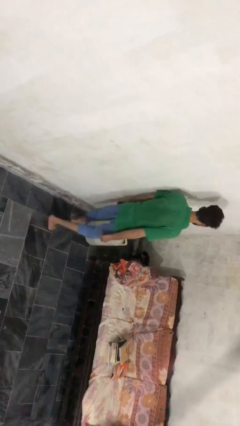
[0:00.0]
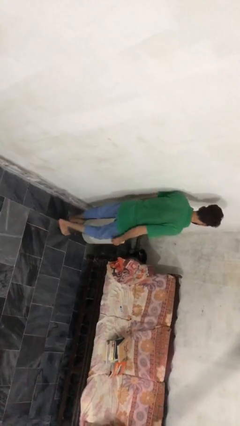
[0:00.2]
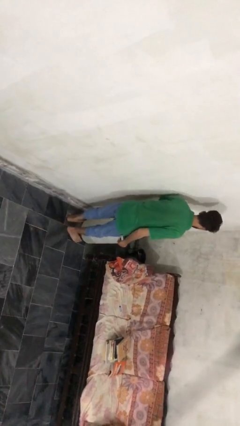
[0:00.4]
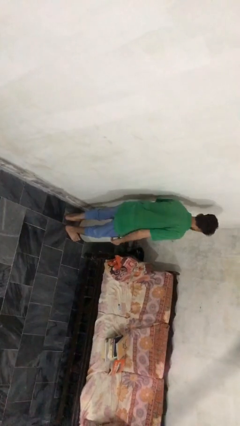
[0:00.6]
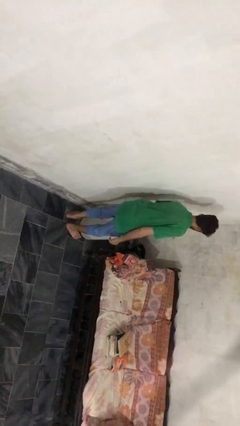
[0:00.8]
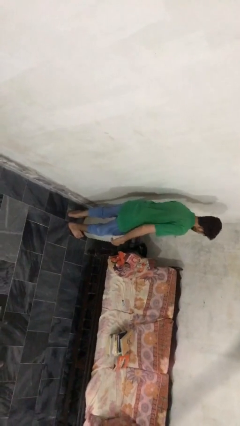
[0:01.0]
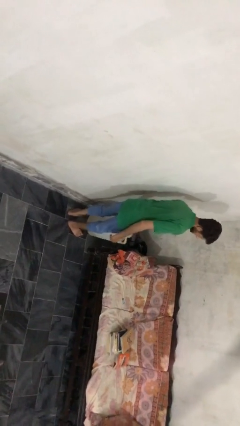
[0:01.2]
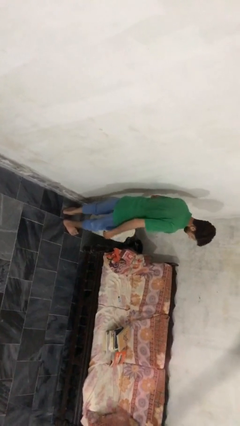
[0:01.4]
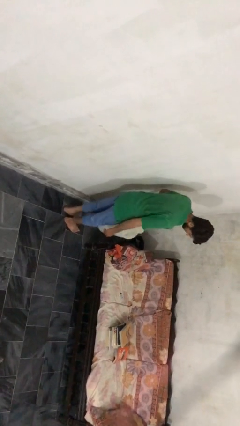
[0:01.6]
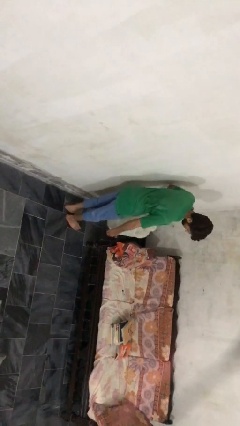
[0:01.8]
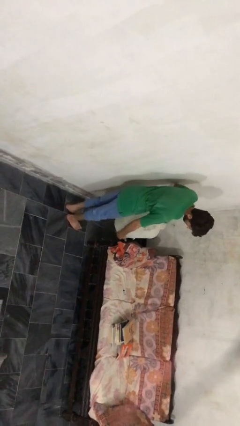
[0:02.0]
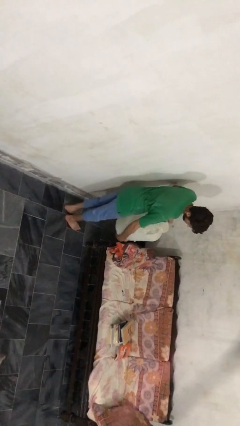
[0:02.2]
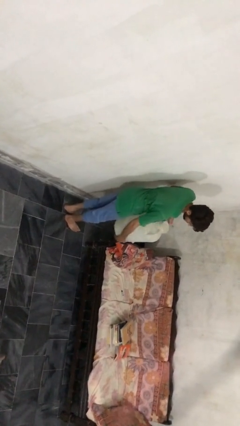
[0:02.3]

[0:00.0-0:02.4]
person picks up object from floor

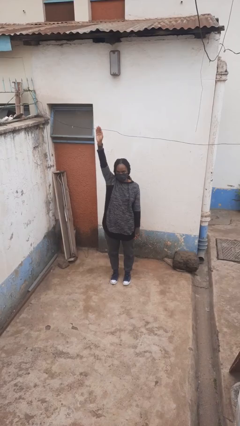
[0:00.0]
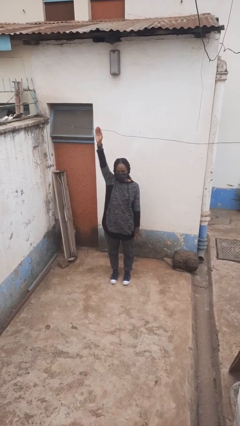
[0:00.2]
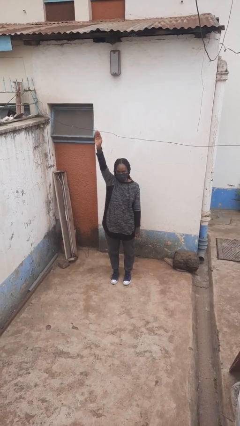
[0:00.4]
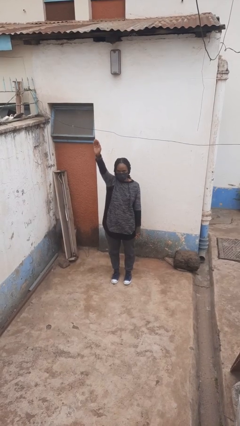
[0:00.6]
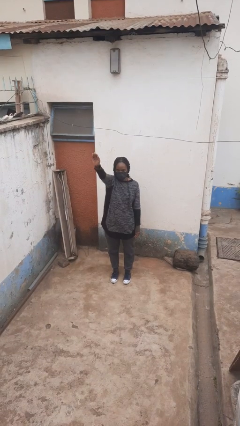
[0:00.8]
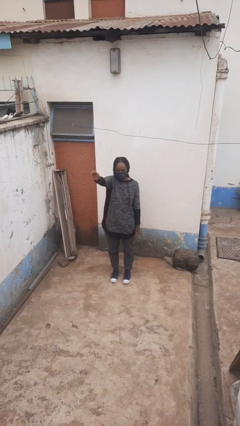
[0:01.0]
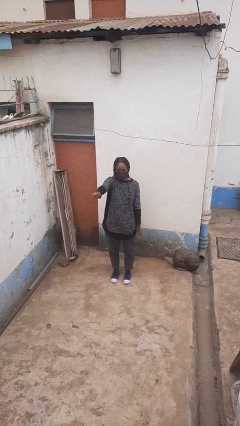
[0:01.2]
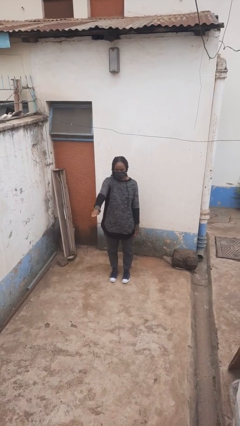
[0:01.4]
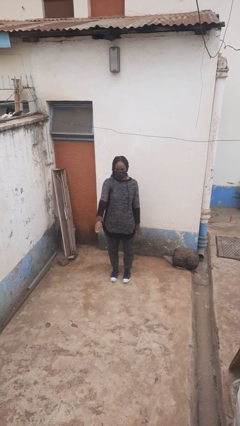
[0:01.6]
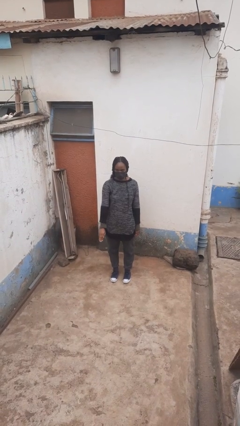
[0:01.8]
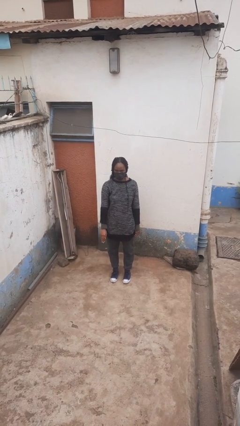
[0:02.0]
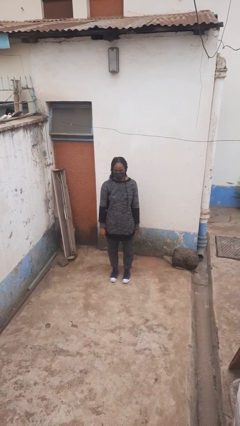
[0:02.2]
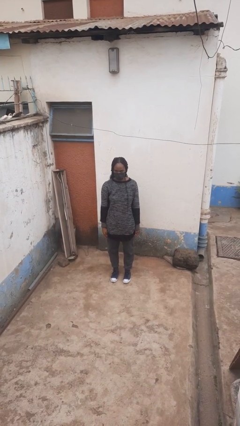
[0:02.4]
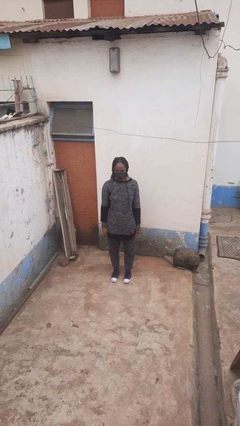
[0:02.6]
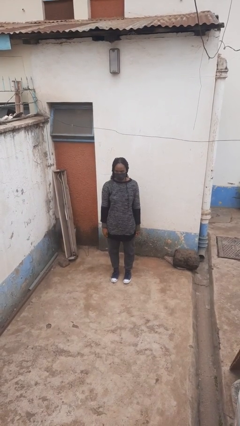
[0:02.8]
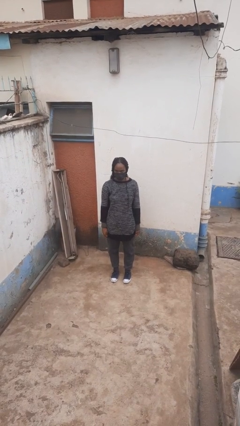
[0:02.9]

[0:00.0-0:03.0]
person gestures lower hand

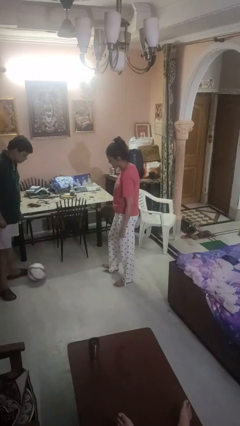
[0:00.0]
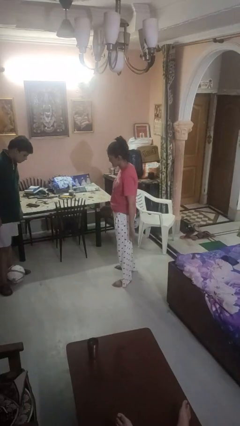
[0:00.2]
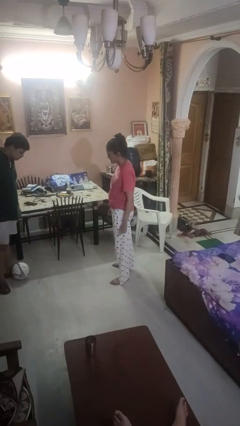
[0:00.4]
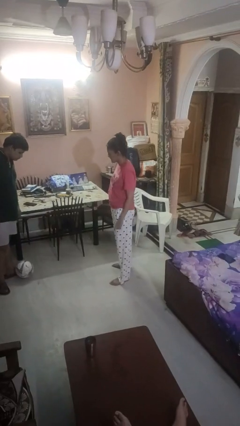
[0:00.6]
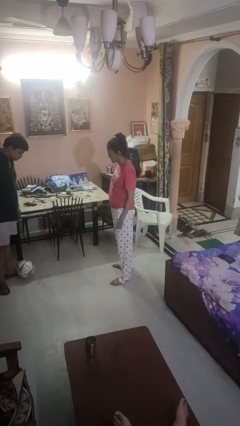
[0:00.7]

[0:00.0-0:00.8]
person kicks object to person

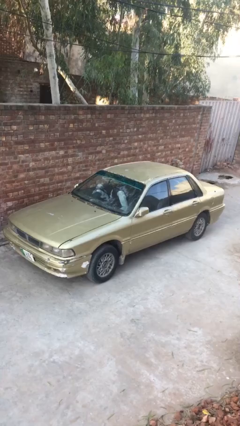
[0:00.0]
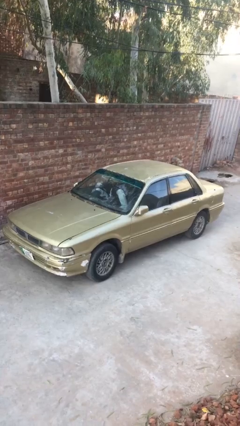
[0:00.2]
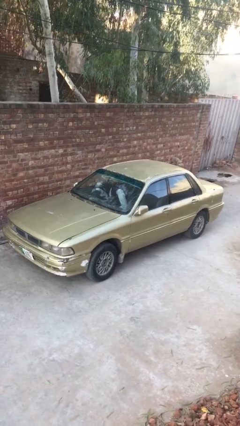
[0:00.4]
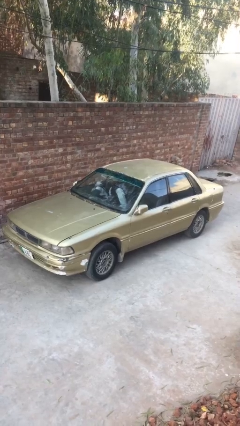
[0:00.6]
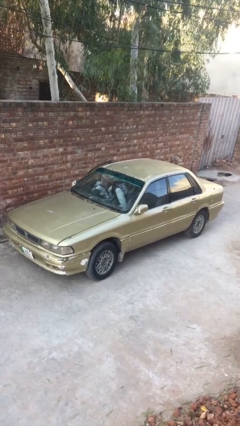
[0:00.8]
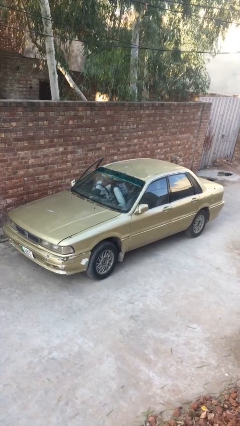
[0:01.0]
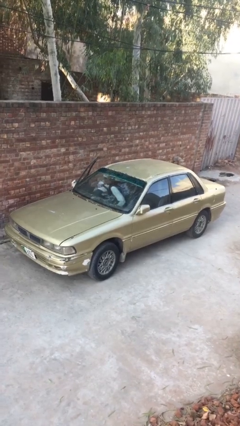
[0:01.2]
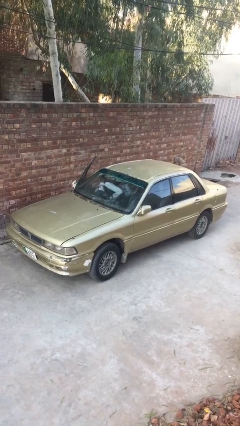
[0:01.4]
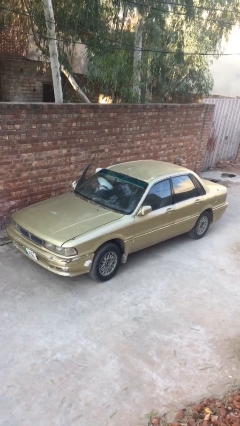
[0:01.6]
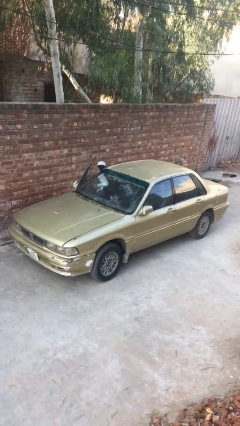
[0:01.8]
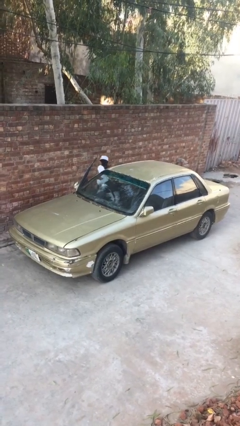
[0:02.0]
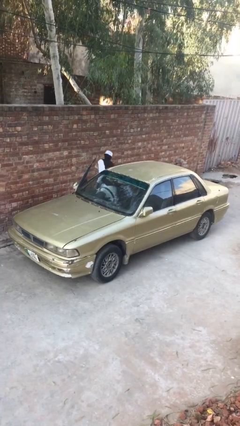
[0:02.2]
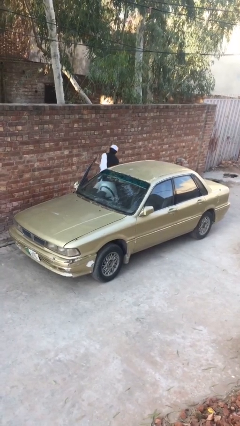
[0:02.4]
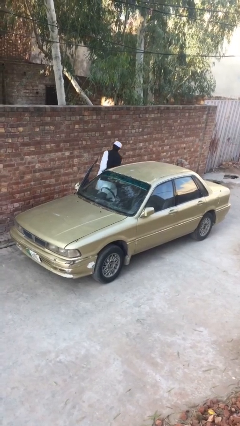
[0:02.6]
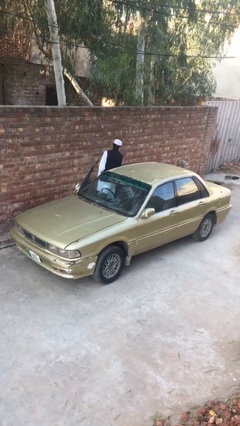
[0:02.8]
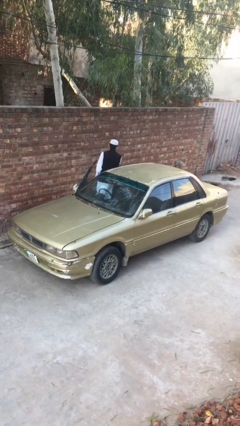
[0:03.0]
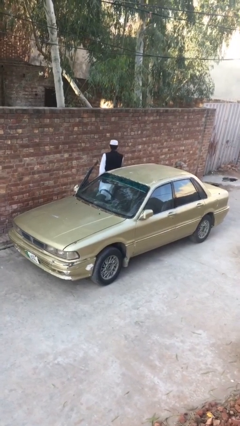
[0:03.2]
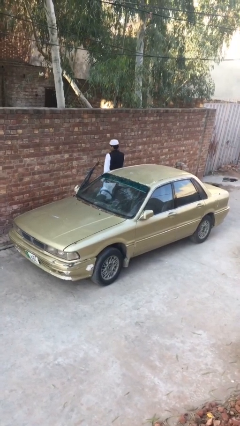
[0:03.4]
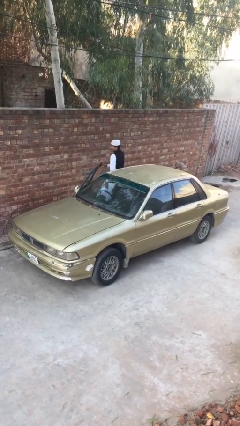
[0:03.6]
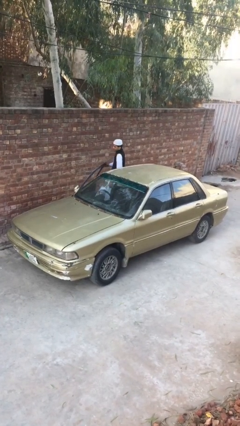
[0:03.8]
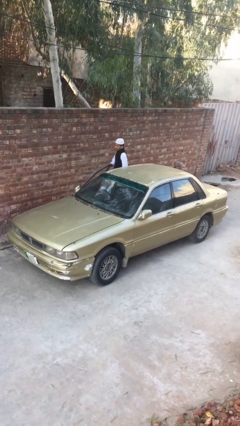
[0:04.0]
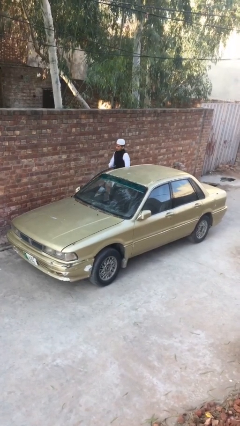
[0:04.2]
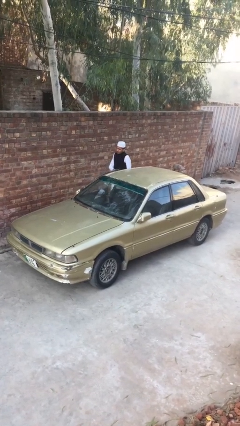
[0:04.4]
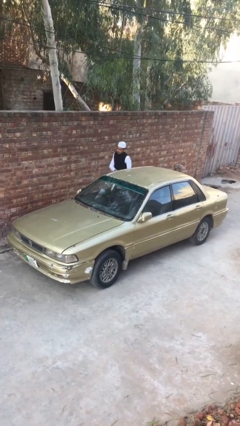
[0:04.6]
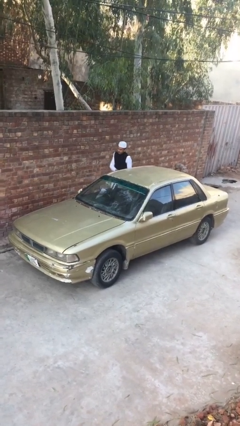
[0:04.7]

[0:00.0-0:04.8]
car drops off person

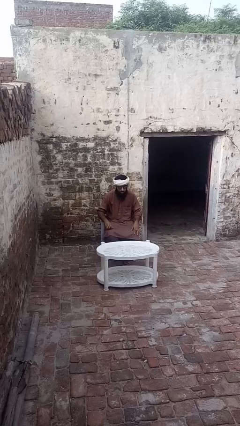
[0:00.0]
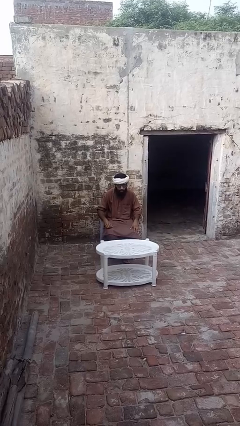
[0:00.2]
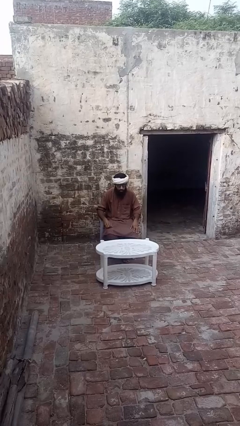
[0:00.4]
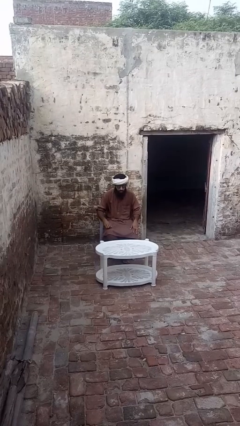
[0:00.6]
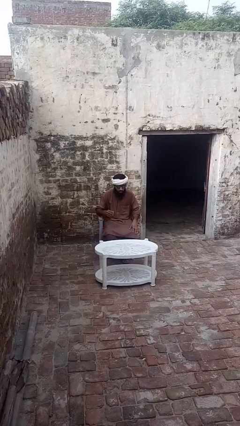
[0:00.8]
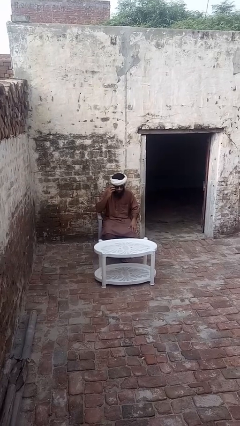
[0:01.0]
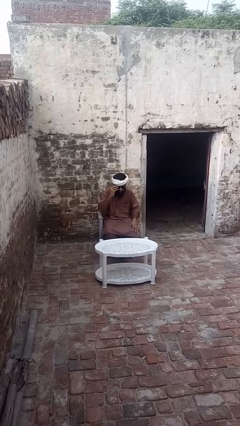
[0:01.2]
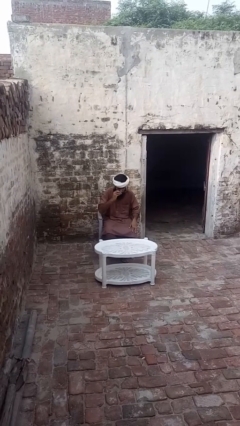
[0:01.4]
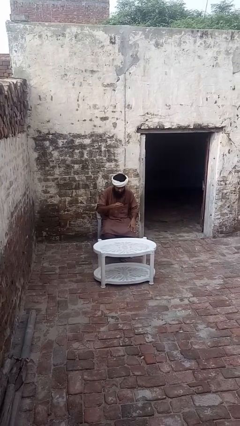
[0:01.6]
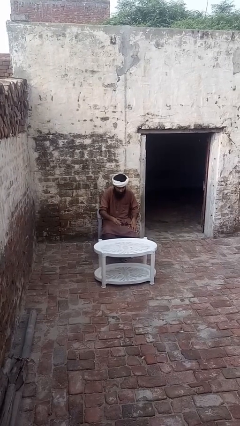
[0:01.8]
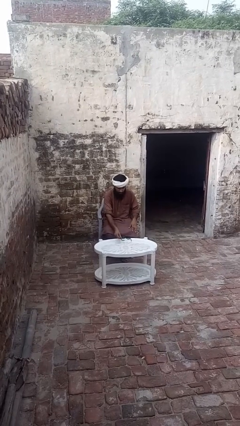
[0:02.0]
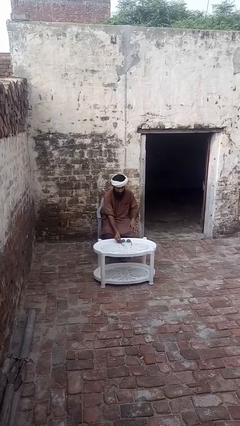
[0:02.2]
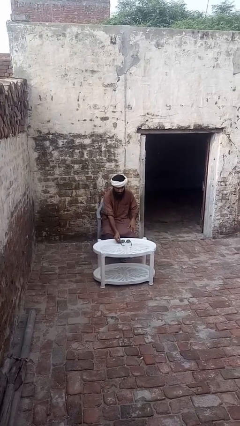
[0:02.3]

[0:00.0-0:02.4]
person takes off sunglasses

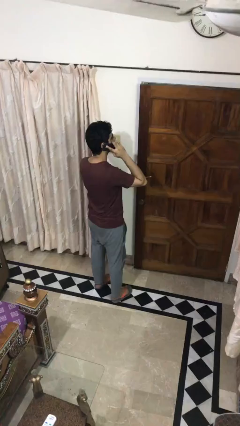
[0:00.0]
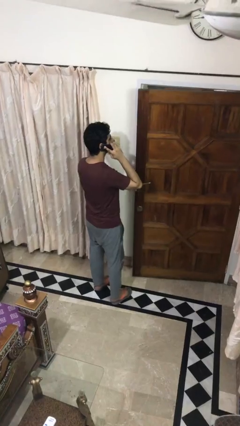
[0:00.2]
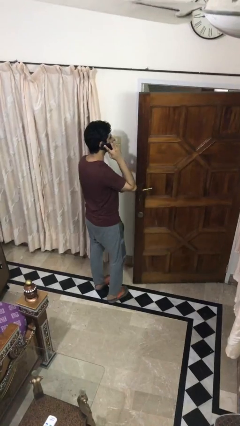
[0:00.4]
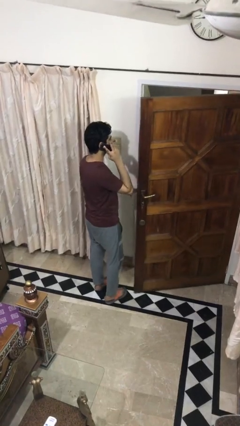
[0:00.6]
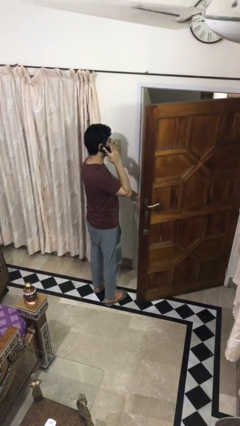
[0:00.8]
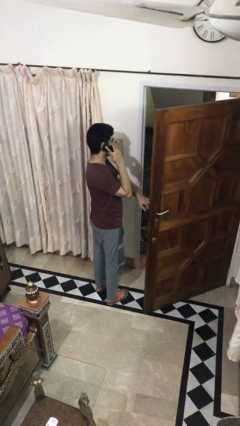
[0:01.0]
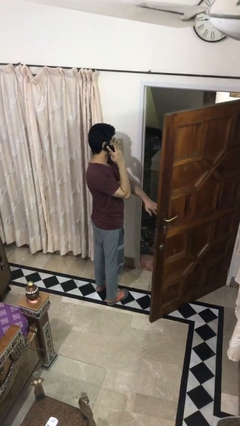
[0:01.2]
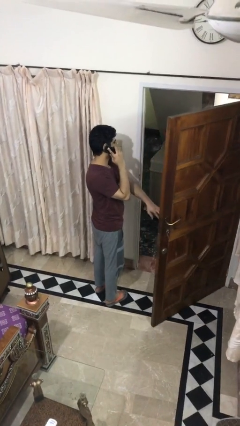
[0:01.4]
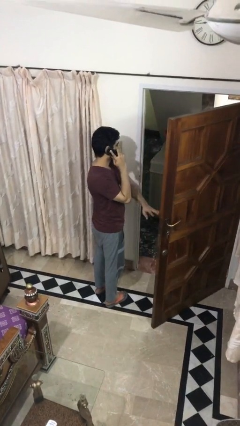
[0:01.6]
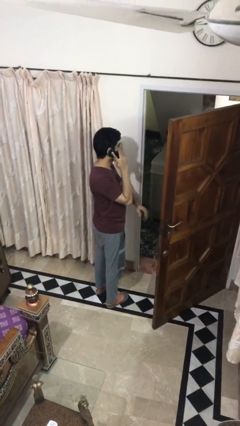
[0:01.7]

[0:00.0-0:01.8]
person opens facility door

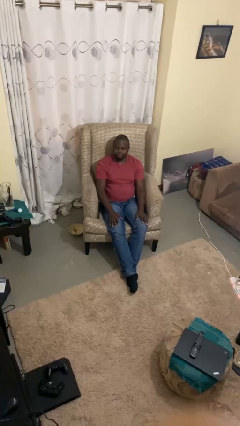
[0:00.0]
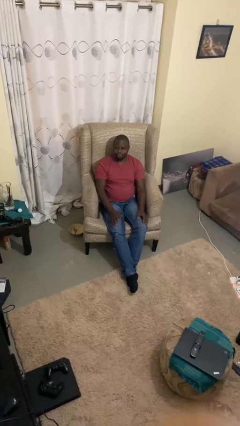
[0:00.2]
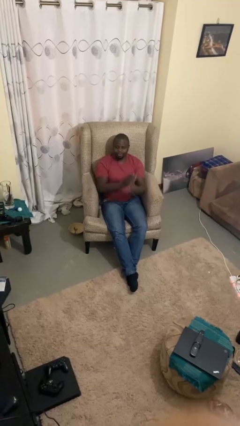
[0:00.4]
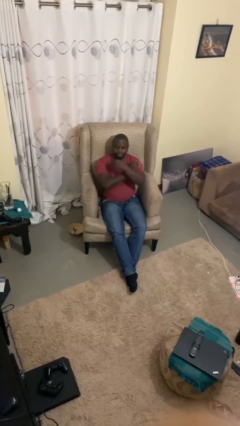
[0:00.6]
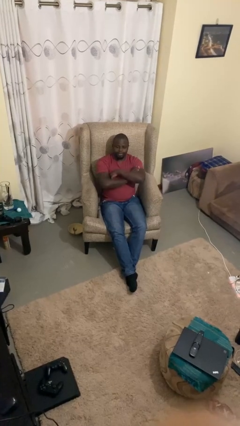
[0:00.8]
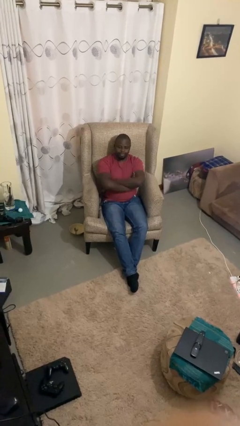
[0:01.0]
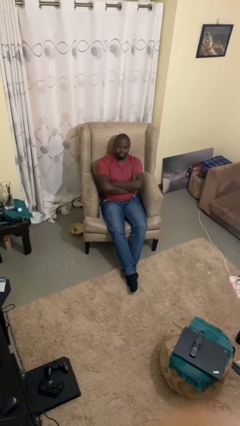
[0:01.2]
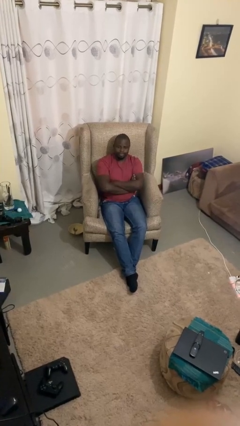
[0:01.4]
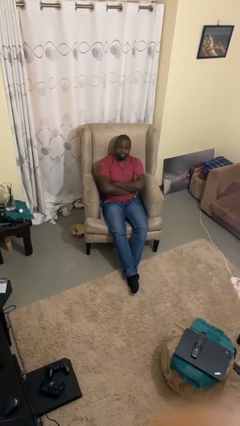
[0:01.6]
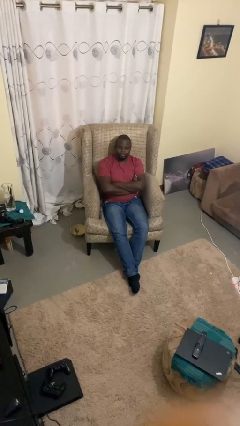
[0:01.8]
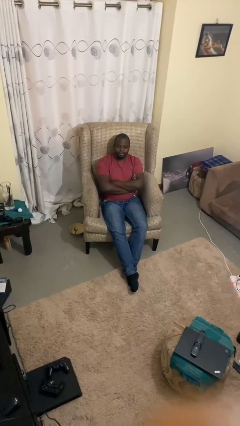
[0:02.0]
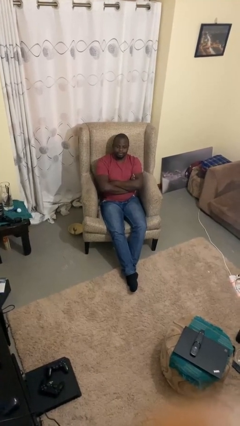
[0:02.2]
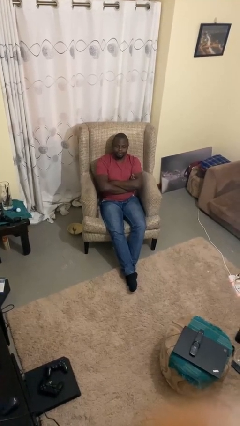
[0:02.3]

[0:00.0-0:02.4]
person crosses arms
